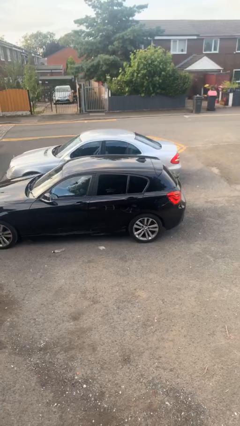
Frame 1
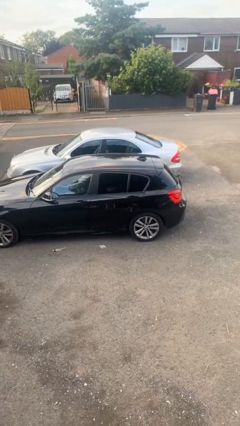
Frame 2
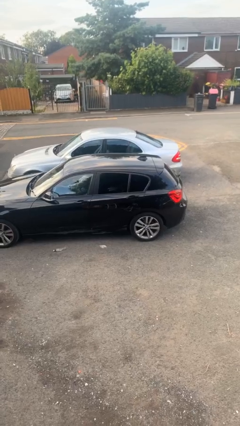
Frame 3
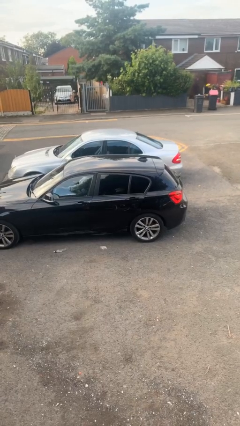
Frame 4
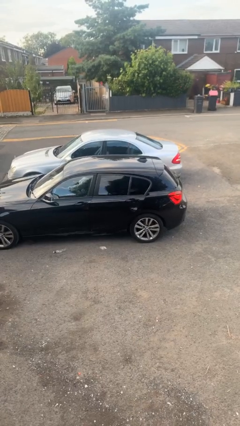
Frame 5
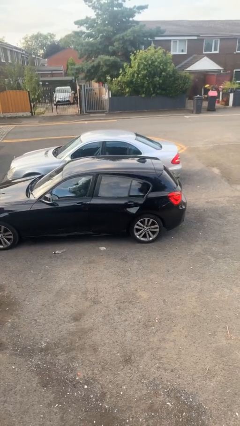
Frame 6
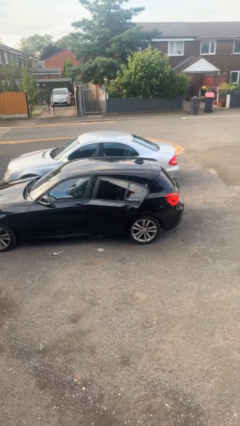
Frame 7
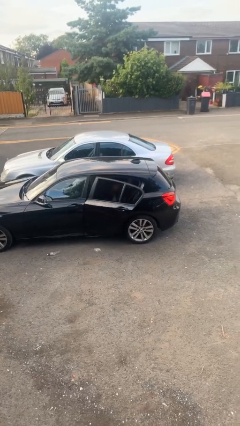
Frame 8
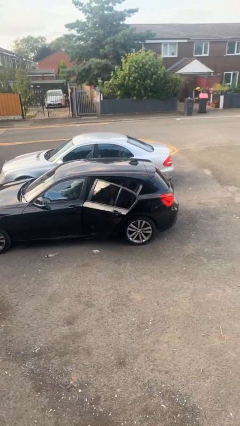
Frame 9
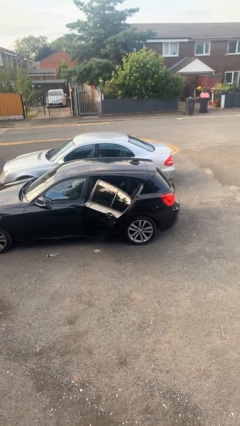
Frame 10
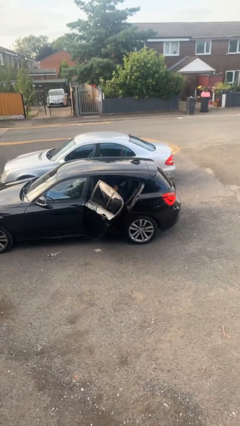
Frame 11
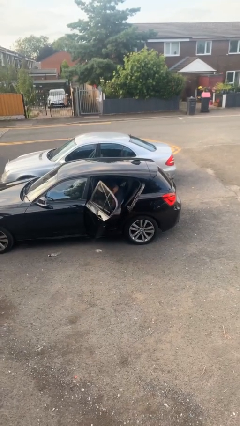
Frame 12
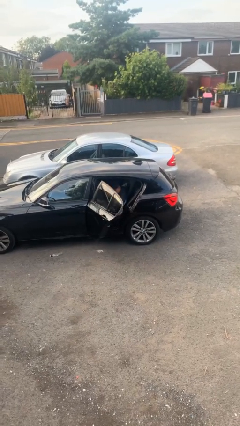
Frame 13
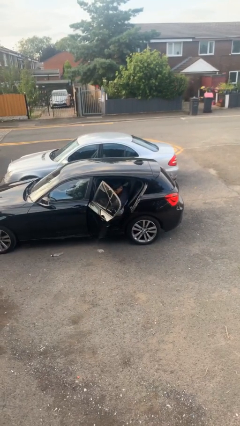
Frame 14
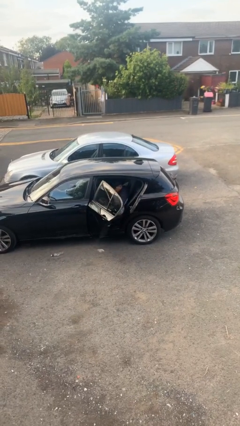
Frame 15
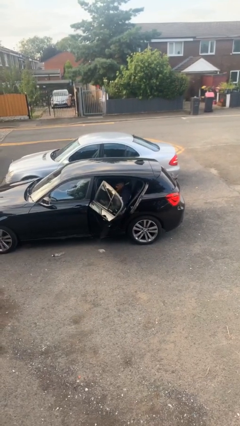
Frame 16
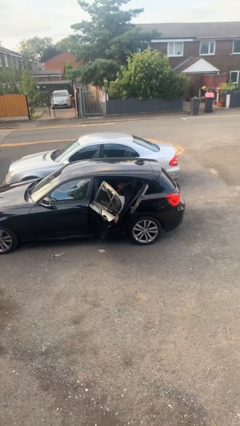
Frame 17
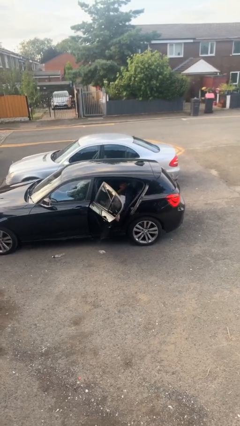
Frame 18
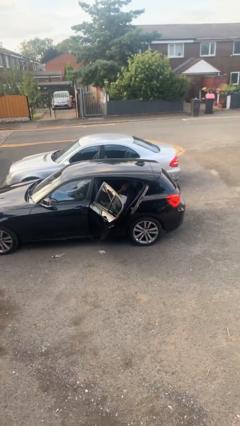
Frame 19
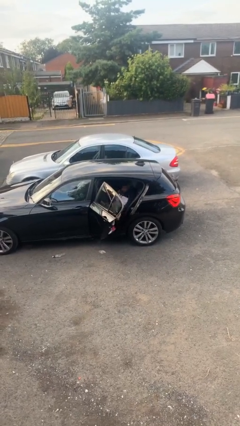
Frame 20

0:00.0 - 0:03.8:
person opens car door

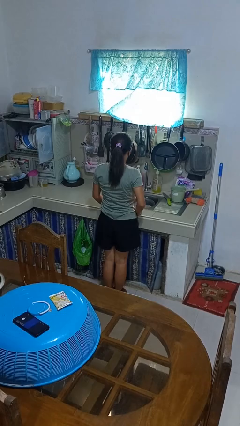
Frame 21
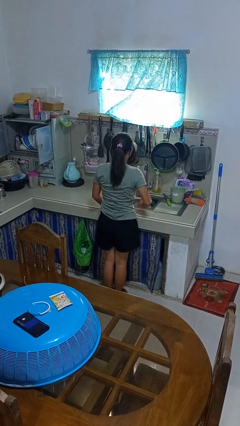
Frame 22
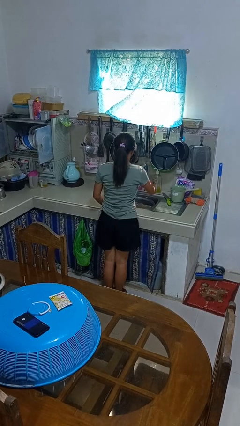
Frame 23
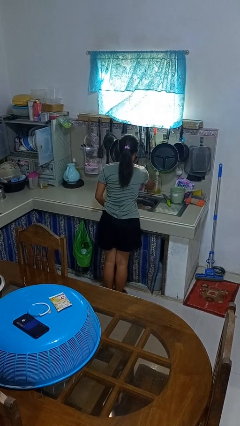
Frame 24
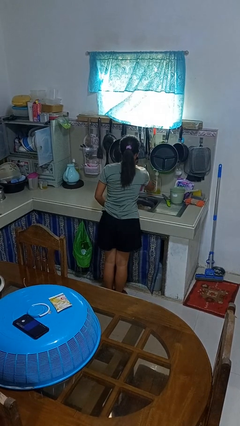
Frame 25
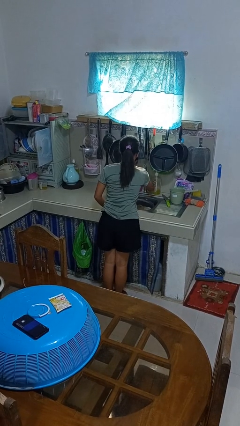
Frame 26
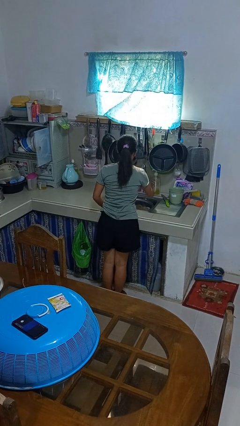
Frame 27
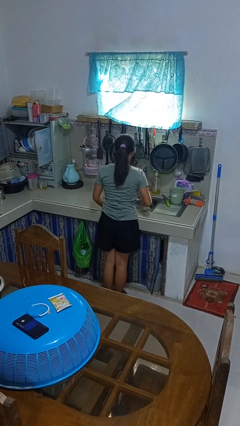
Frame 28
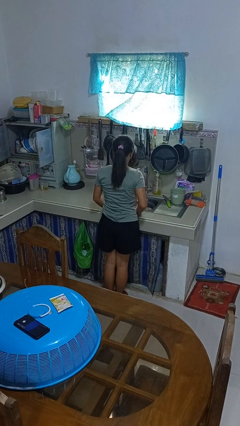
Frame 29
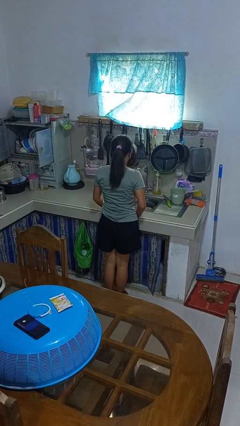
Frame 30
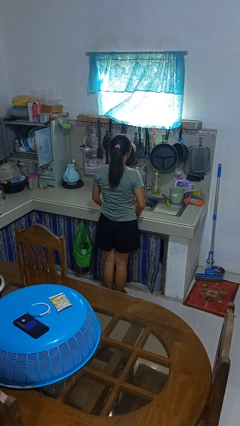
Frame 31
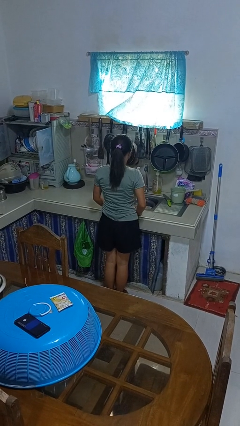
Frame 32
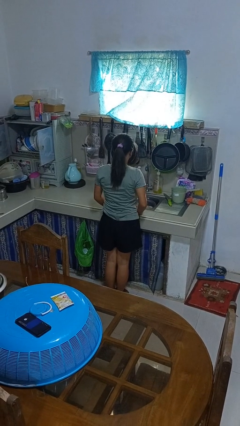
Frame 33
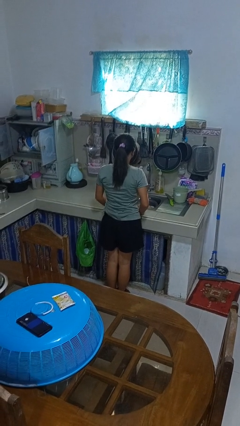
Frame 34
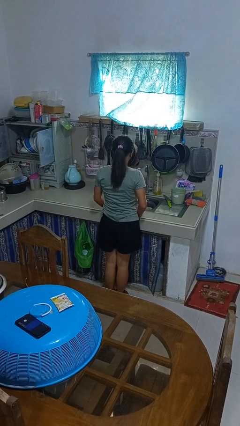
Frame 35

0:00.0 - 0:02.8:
person turns on faucet

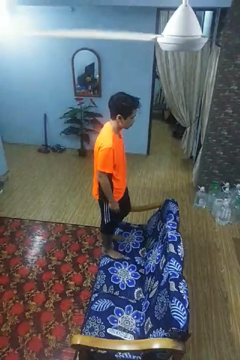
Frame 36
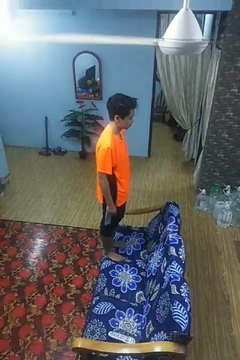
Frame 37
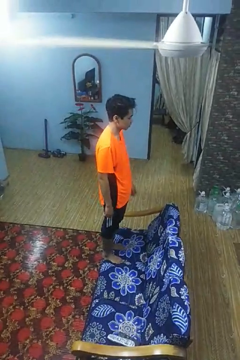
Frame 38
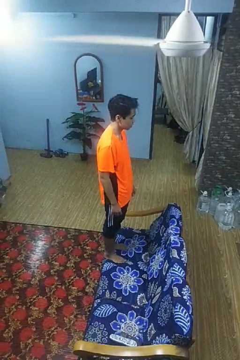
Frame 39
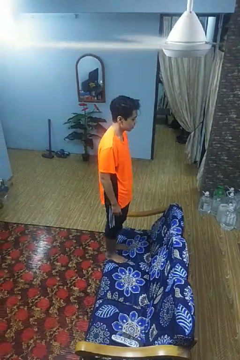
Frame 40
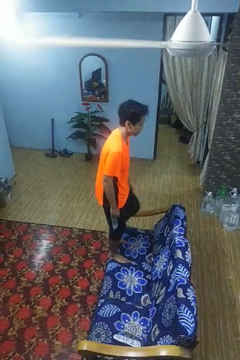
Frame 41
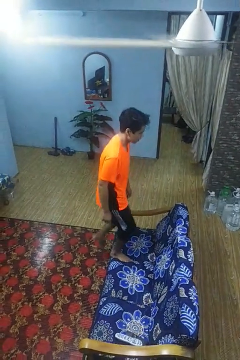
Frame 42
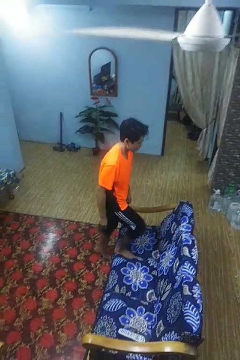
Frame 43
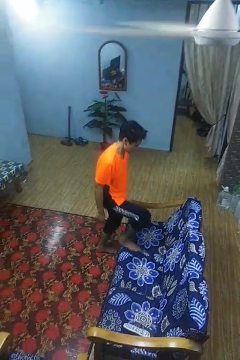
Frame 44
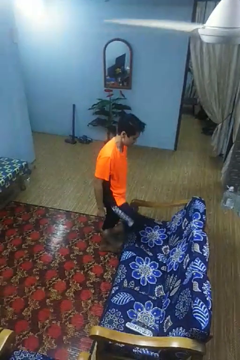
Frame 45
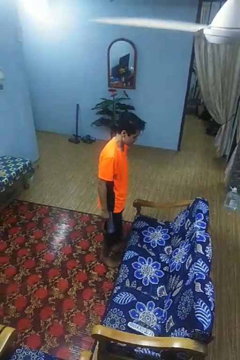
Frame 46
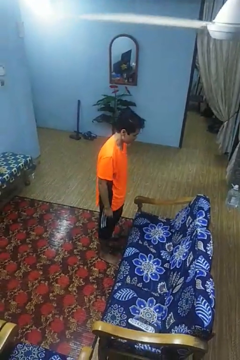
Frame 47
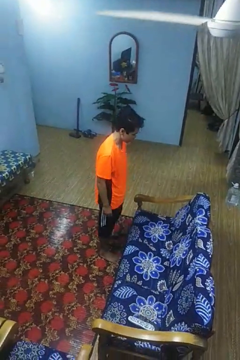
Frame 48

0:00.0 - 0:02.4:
person climbs off couch

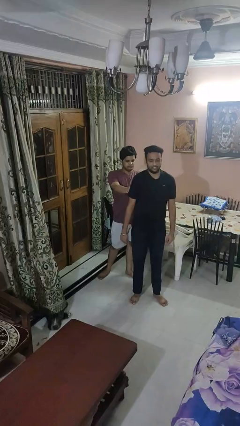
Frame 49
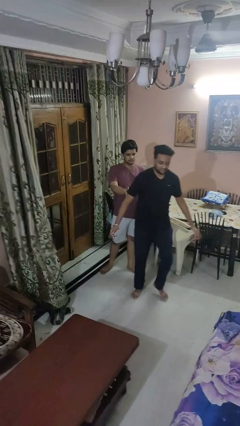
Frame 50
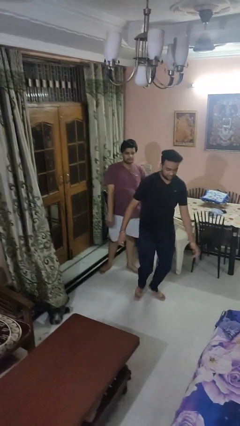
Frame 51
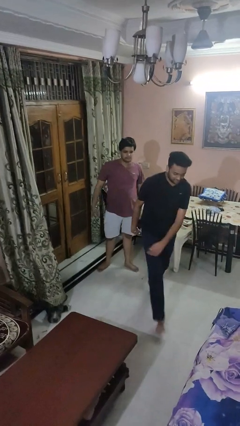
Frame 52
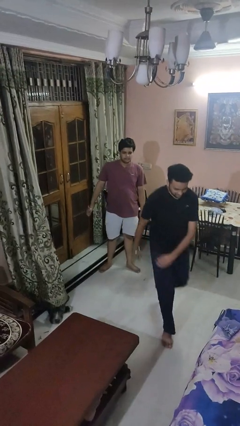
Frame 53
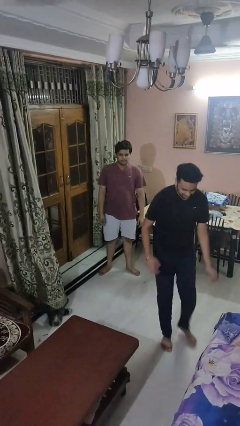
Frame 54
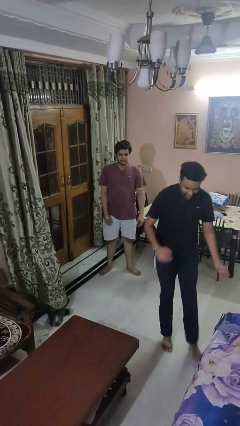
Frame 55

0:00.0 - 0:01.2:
person shoves person

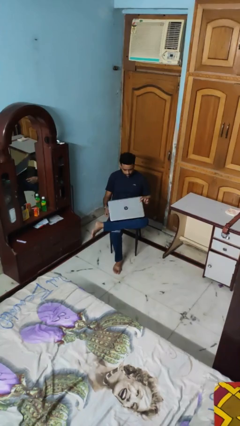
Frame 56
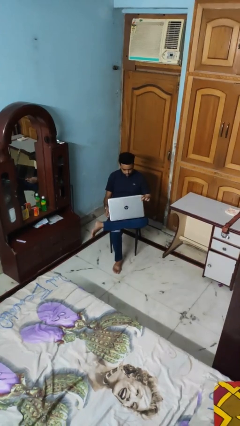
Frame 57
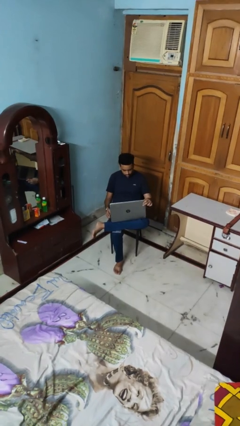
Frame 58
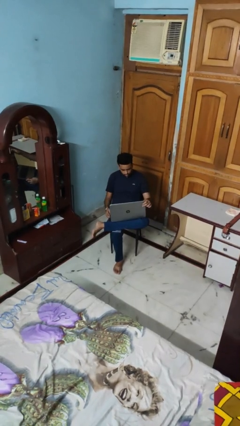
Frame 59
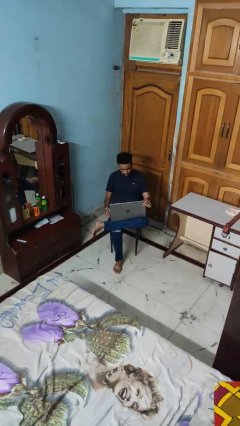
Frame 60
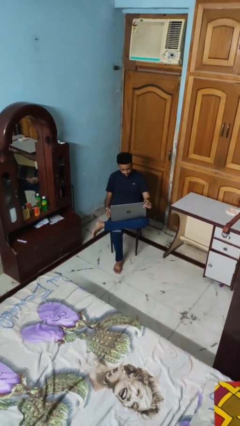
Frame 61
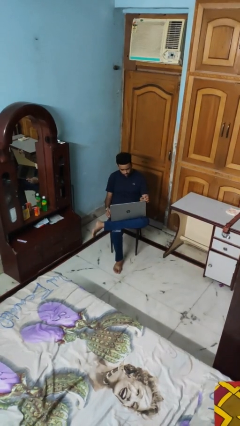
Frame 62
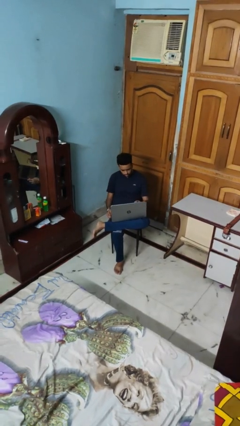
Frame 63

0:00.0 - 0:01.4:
person opens laptop

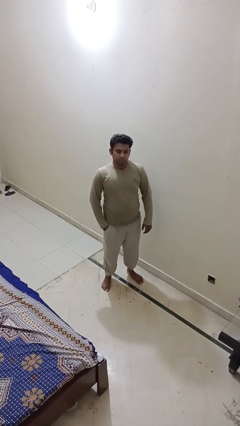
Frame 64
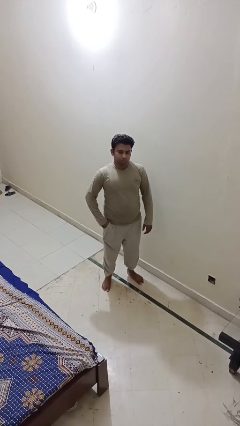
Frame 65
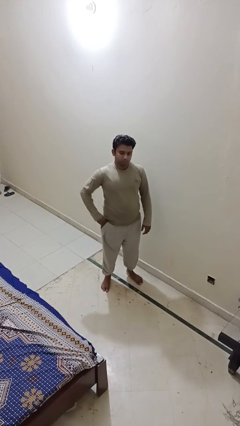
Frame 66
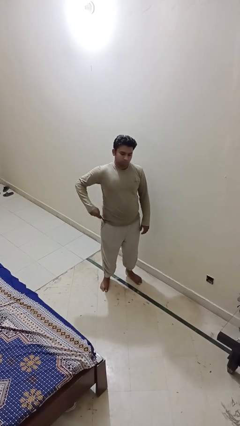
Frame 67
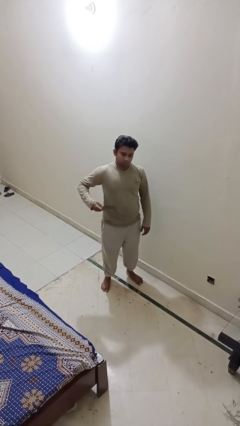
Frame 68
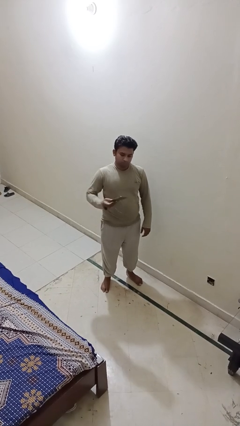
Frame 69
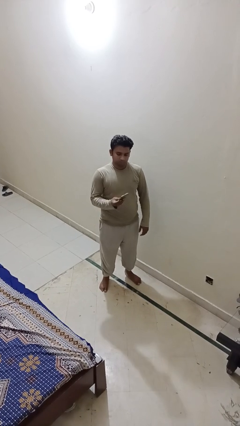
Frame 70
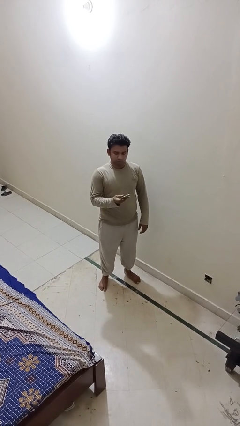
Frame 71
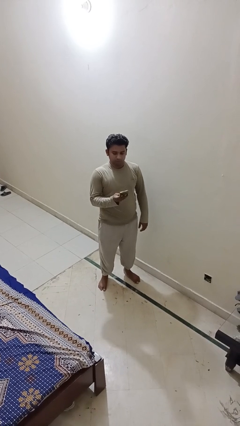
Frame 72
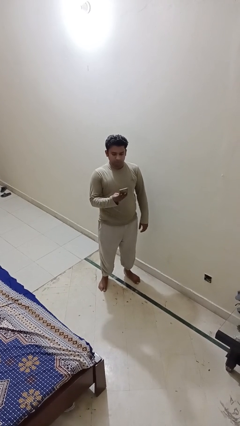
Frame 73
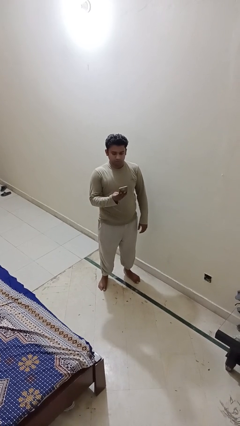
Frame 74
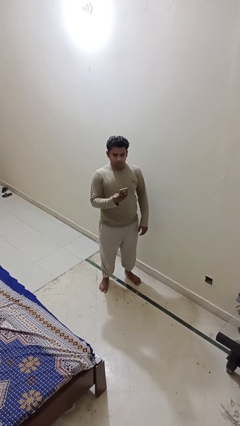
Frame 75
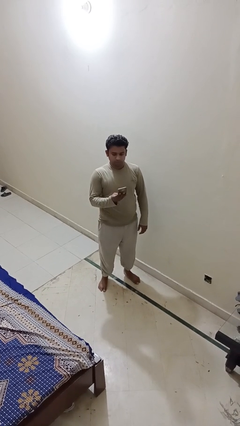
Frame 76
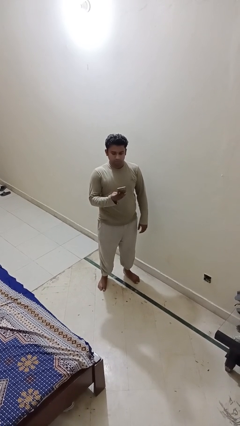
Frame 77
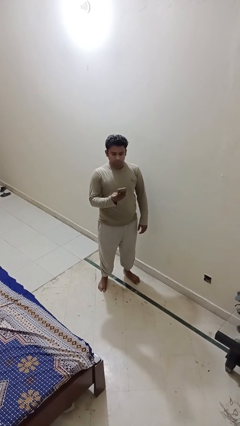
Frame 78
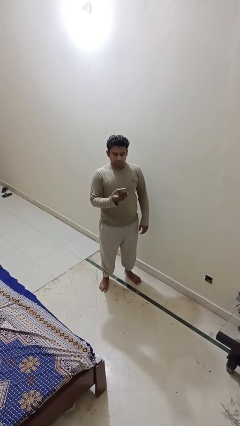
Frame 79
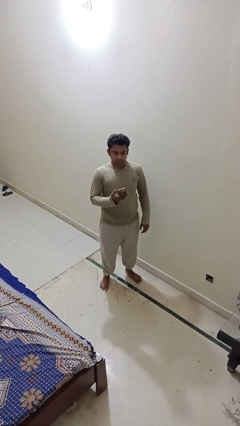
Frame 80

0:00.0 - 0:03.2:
person takes phone from pocket

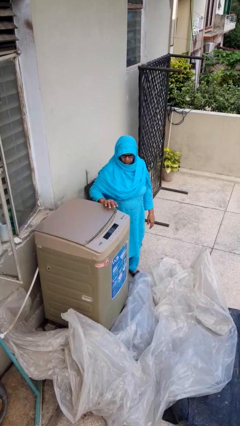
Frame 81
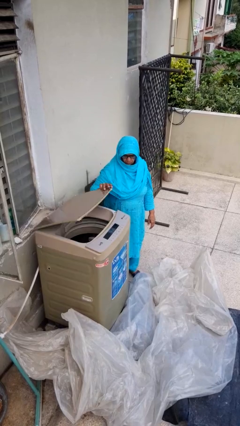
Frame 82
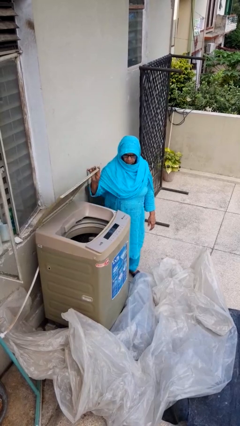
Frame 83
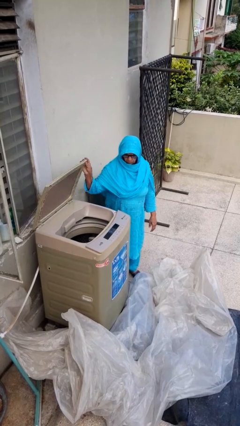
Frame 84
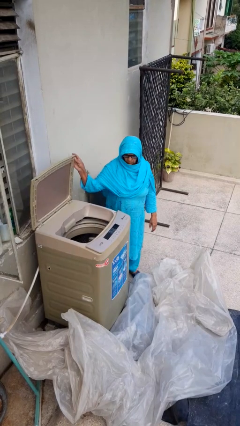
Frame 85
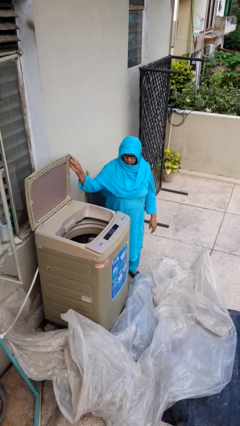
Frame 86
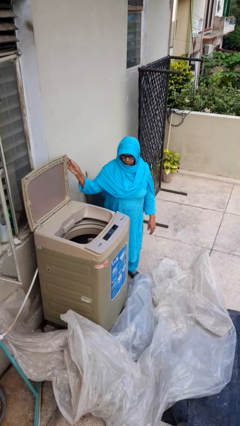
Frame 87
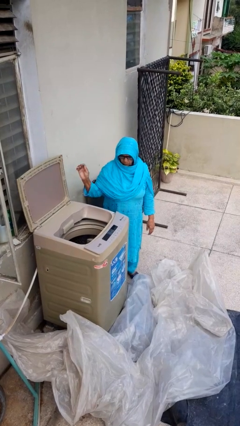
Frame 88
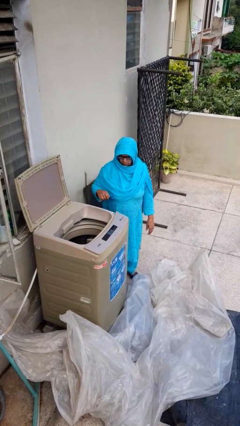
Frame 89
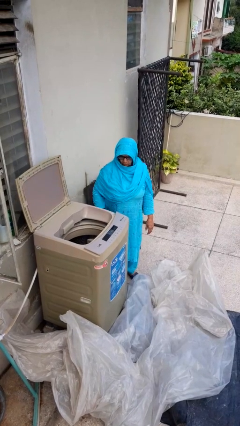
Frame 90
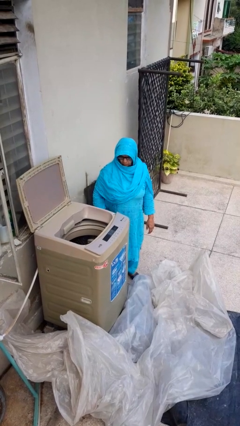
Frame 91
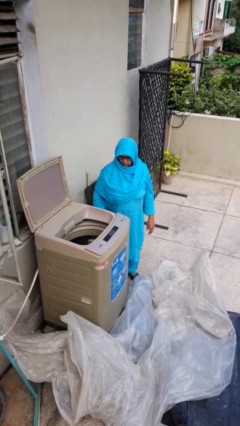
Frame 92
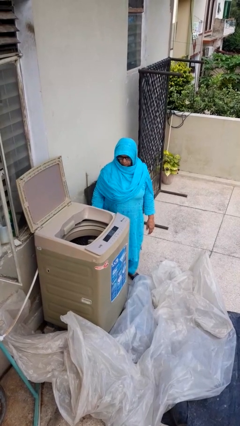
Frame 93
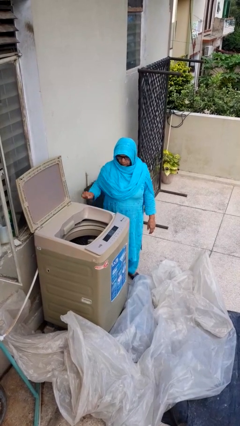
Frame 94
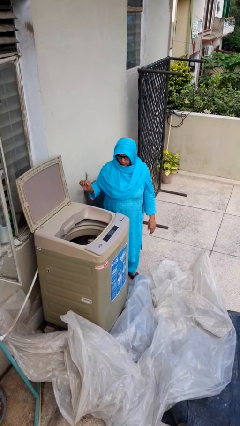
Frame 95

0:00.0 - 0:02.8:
person opens clothes washer
